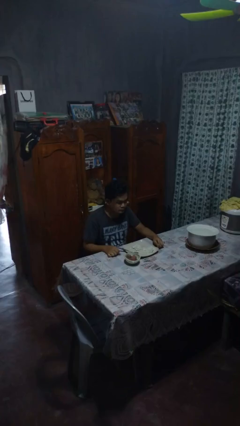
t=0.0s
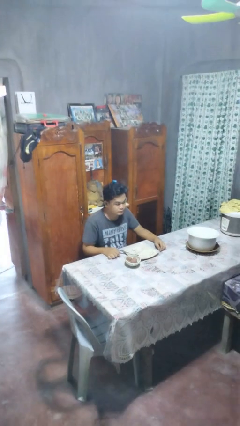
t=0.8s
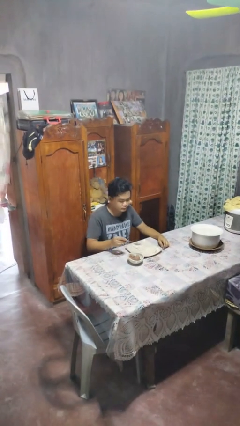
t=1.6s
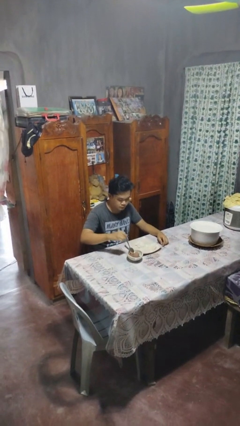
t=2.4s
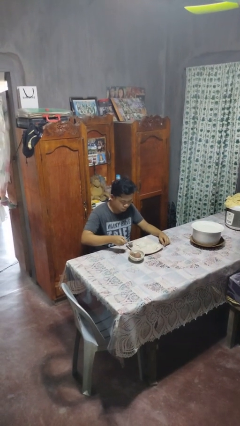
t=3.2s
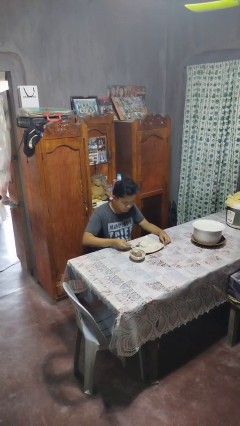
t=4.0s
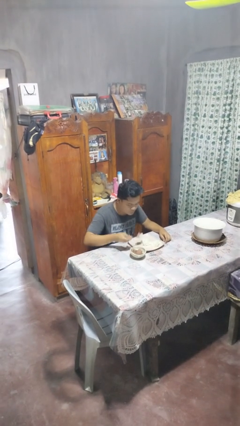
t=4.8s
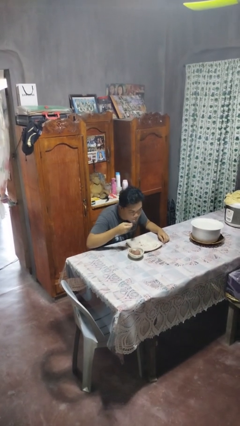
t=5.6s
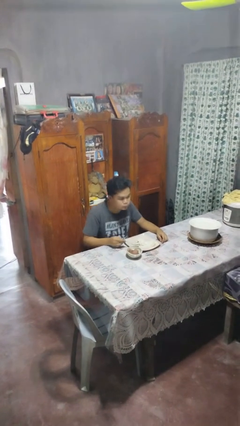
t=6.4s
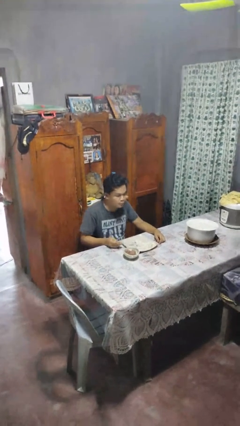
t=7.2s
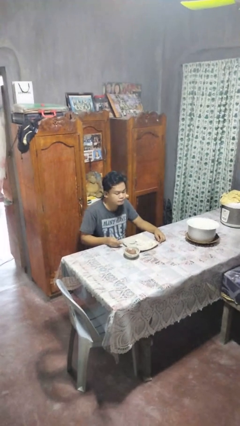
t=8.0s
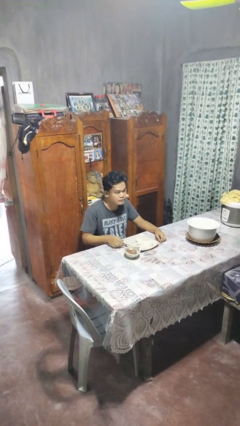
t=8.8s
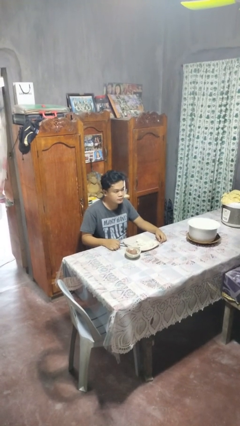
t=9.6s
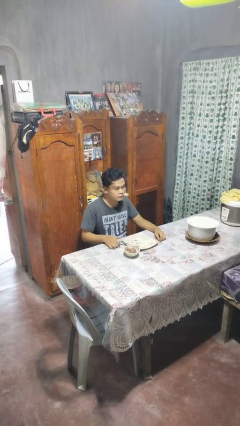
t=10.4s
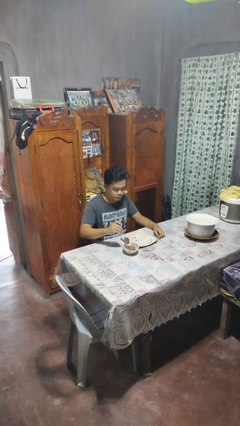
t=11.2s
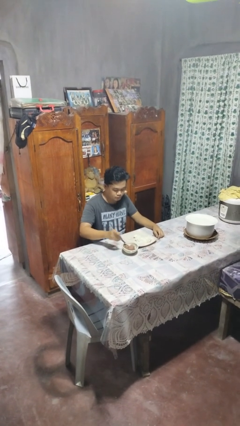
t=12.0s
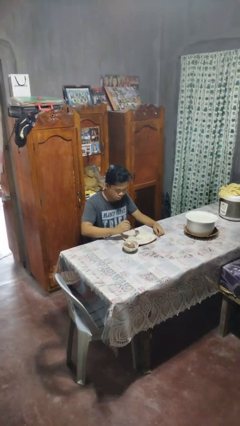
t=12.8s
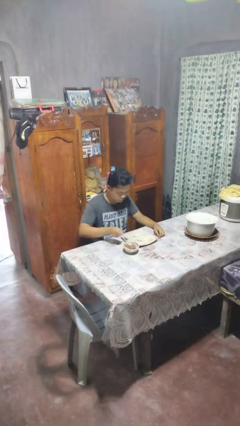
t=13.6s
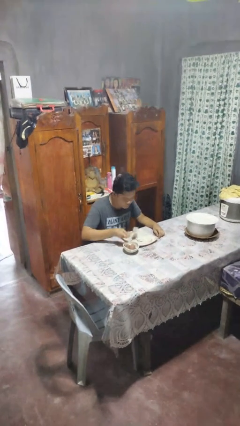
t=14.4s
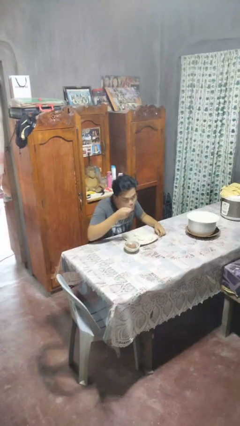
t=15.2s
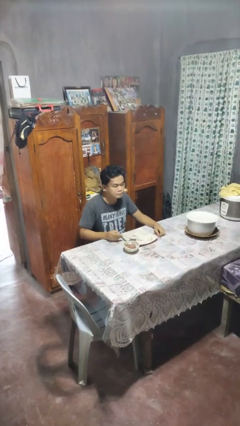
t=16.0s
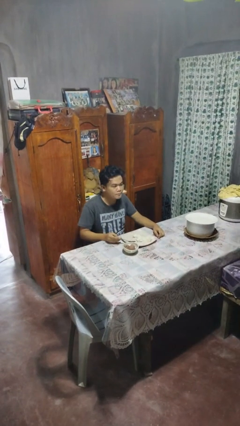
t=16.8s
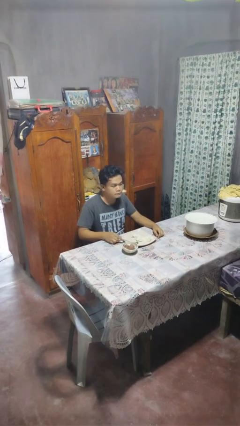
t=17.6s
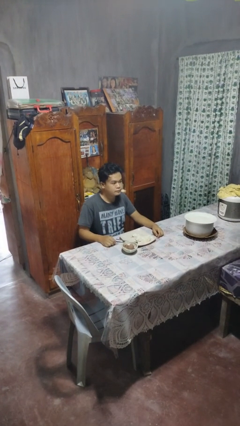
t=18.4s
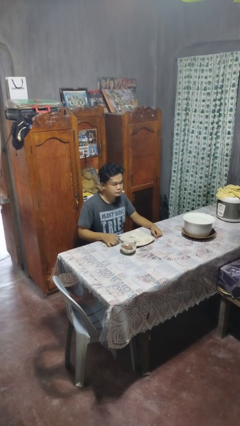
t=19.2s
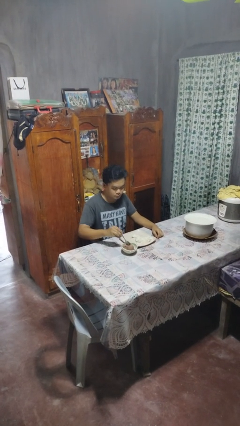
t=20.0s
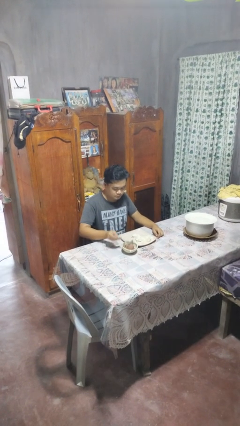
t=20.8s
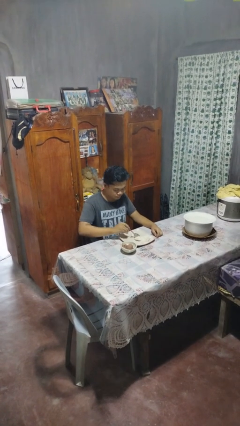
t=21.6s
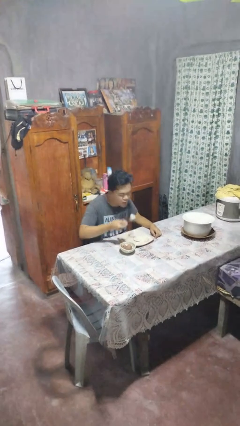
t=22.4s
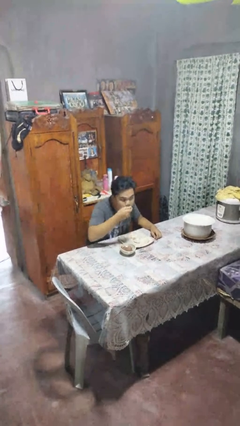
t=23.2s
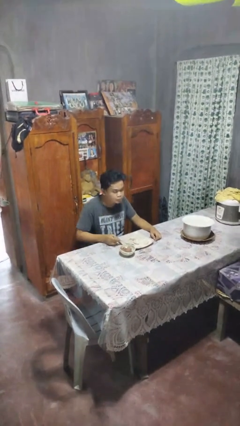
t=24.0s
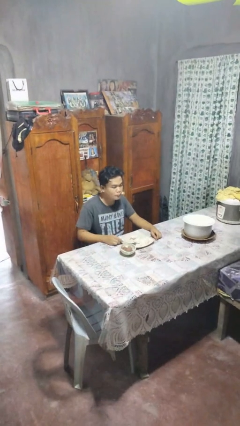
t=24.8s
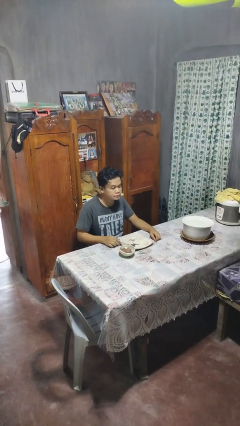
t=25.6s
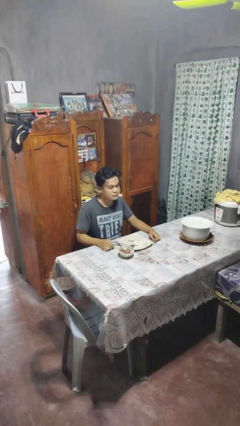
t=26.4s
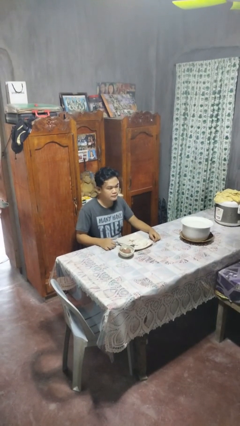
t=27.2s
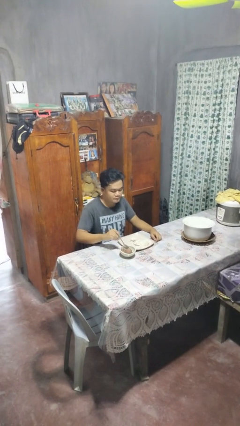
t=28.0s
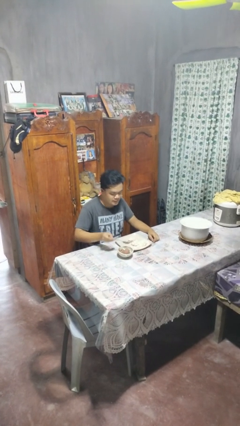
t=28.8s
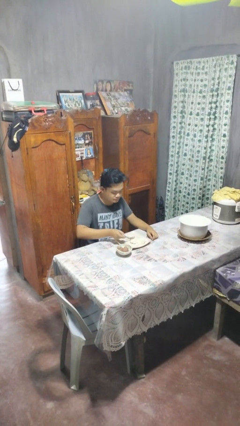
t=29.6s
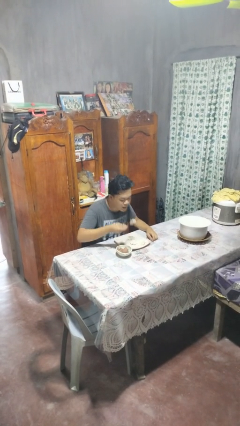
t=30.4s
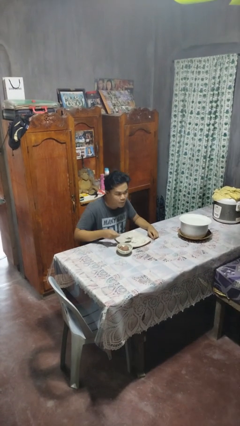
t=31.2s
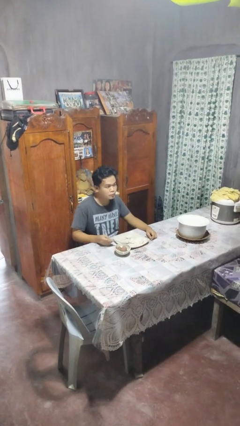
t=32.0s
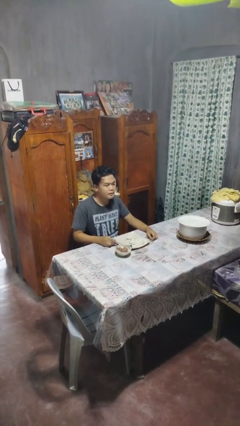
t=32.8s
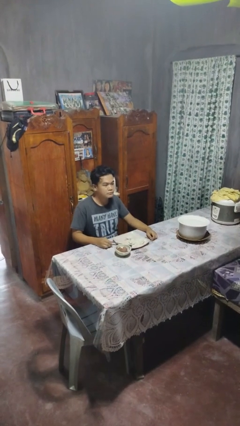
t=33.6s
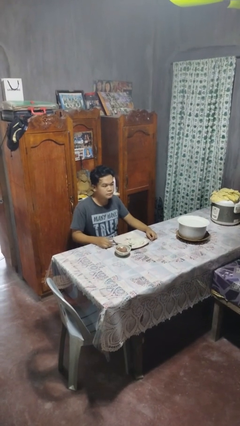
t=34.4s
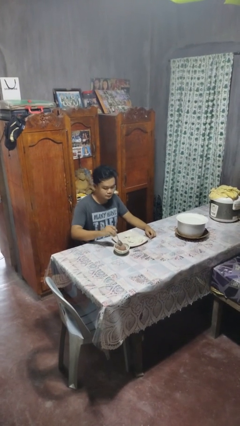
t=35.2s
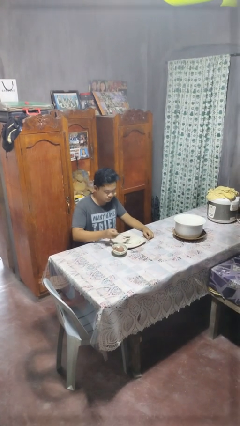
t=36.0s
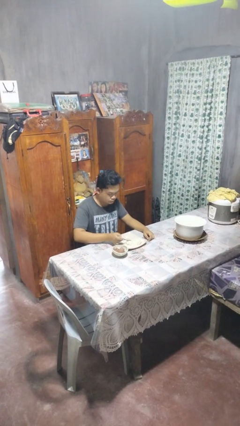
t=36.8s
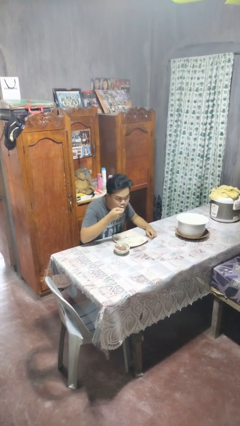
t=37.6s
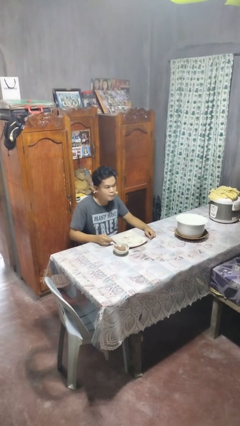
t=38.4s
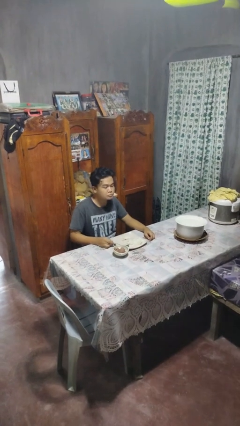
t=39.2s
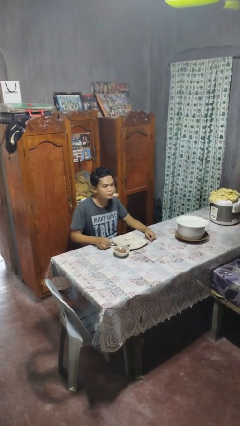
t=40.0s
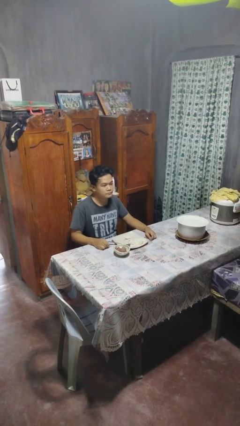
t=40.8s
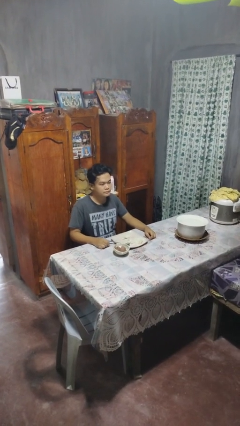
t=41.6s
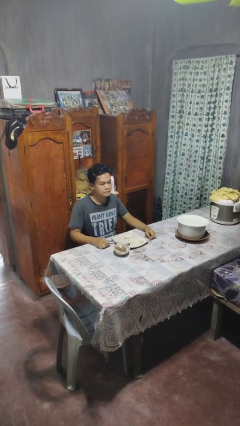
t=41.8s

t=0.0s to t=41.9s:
person eats with utensil

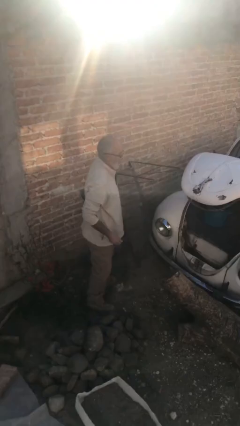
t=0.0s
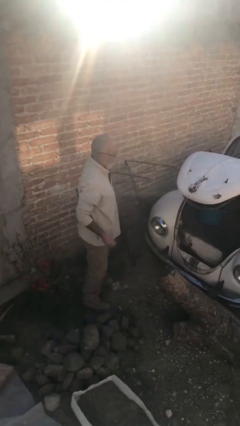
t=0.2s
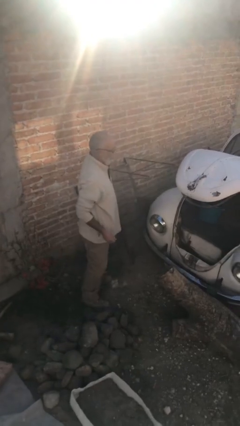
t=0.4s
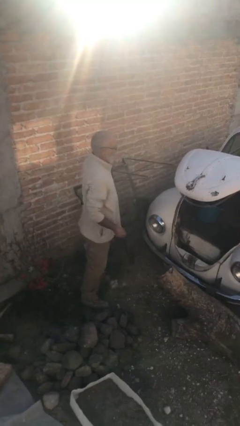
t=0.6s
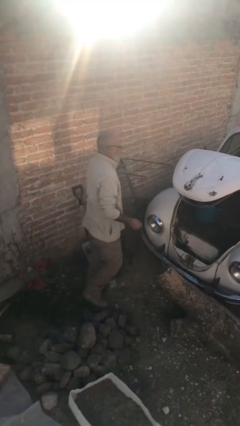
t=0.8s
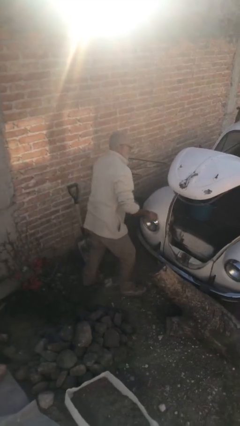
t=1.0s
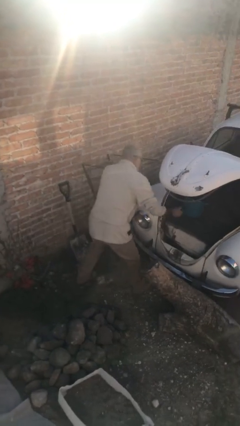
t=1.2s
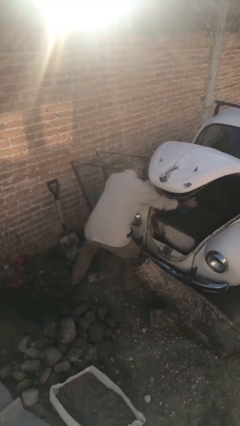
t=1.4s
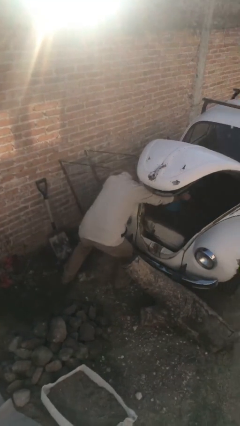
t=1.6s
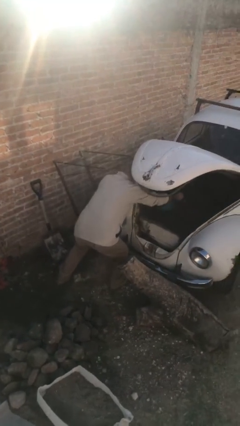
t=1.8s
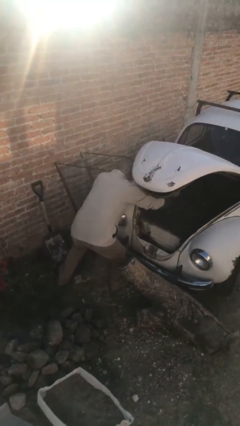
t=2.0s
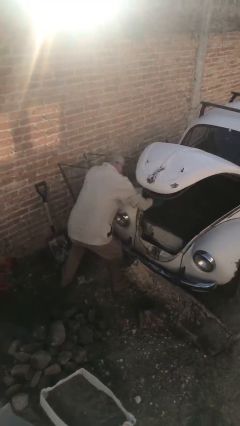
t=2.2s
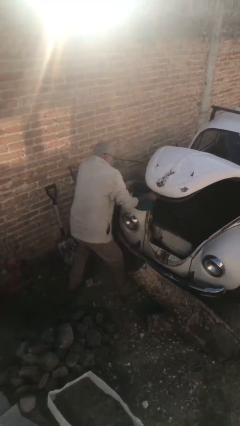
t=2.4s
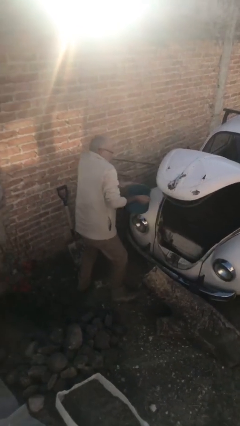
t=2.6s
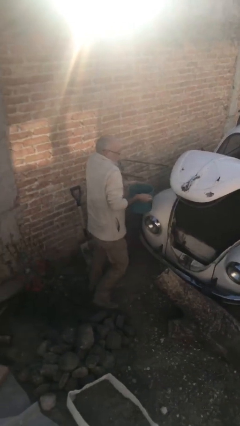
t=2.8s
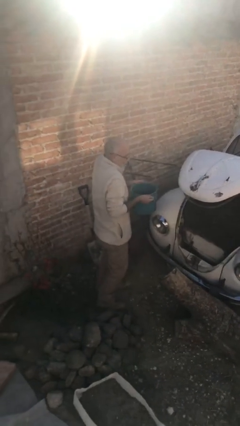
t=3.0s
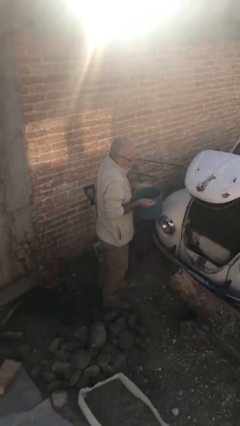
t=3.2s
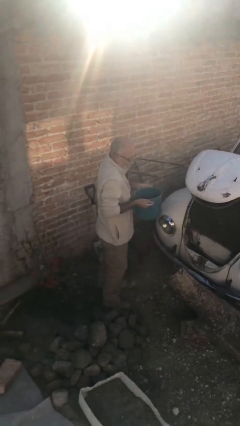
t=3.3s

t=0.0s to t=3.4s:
person unloads car

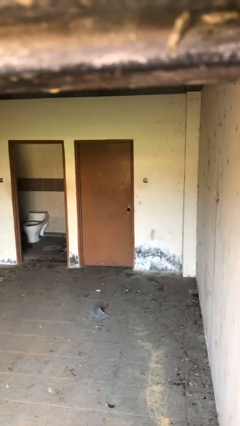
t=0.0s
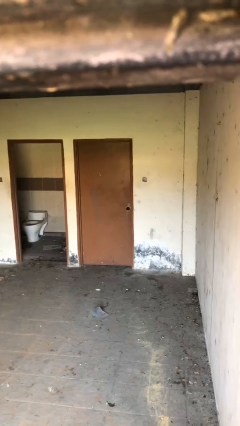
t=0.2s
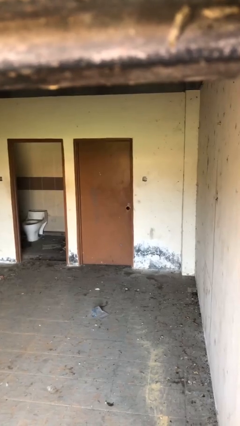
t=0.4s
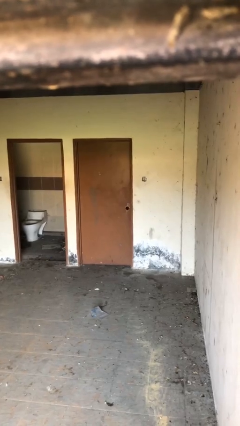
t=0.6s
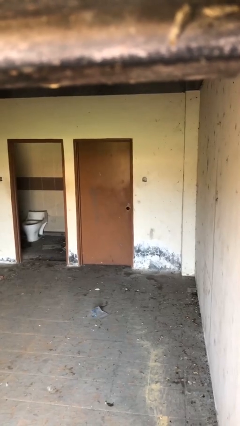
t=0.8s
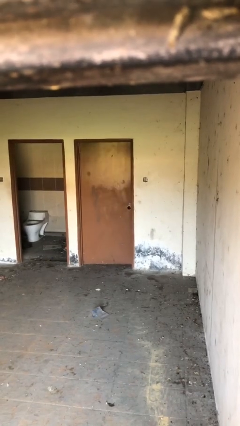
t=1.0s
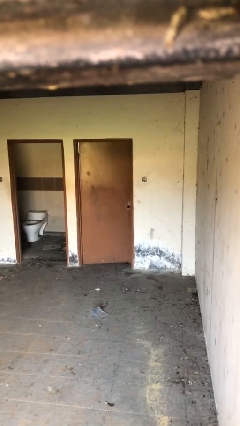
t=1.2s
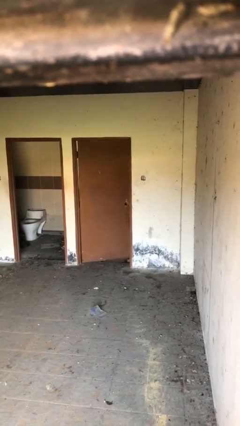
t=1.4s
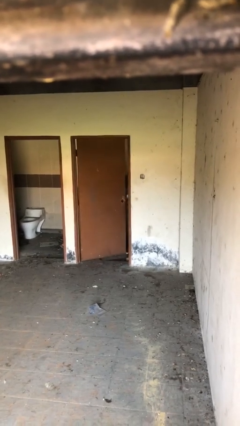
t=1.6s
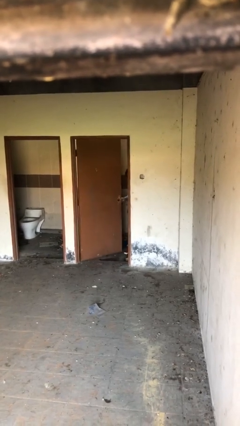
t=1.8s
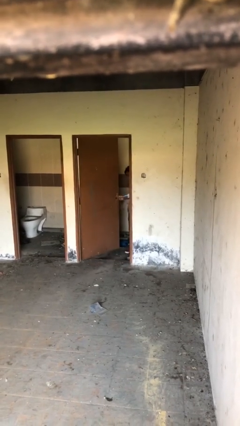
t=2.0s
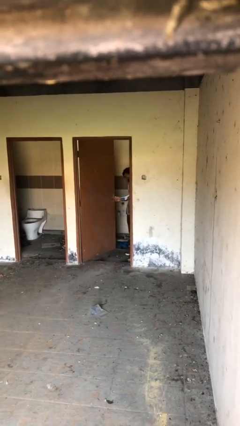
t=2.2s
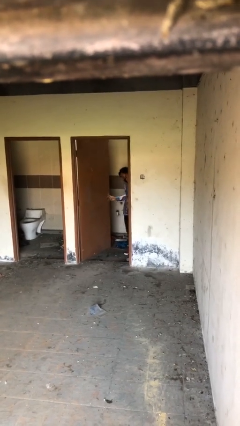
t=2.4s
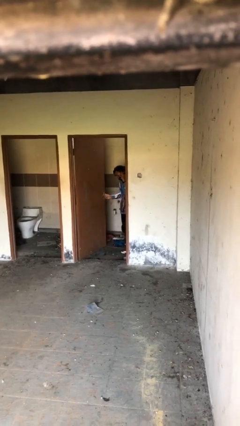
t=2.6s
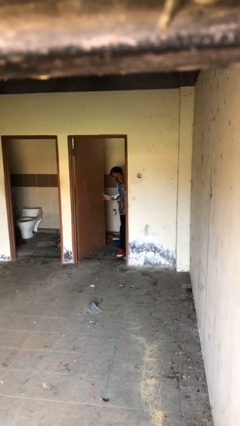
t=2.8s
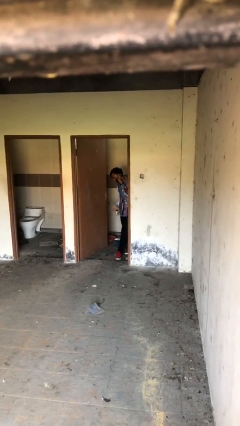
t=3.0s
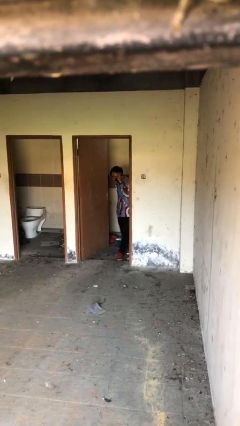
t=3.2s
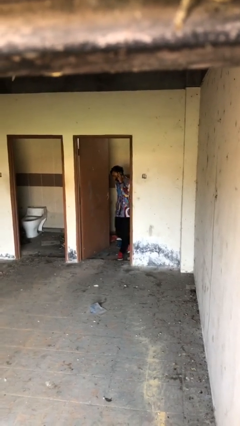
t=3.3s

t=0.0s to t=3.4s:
person opens facility door

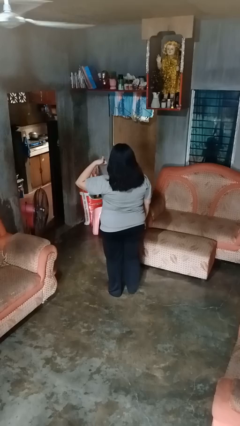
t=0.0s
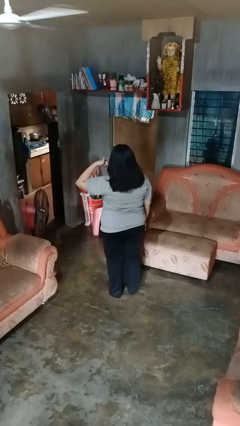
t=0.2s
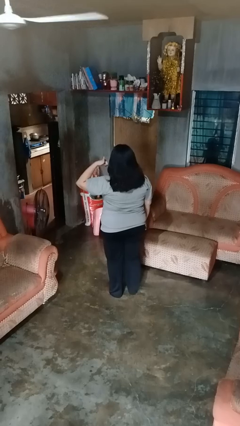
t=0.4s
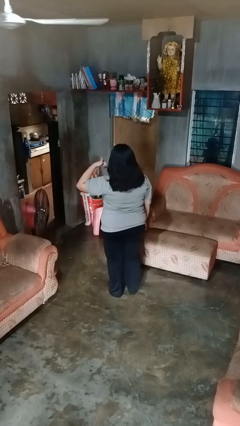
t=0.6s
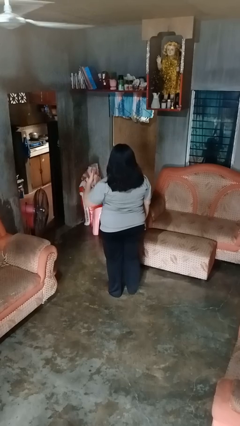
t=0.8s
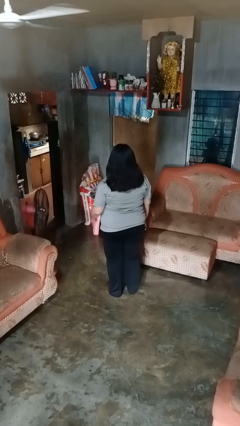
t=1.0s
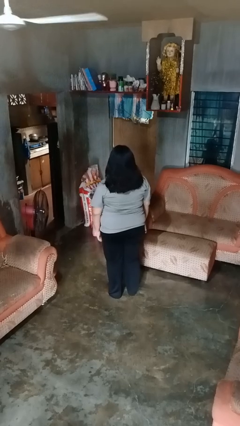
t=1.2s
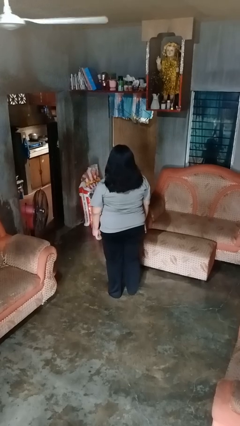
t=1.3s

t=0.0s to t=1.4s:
person gestures call me
